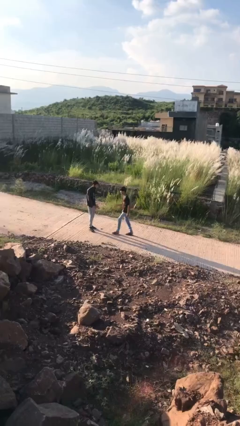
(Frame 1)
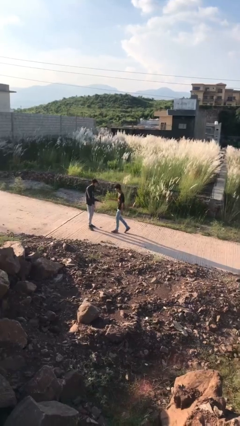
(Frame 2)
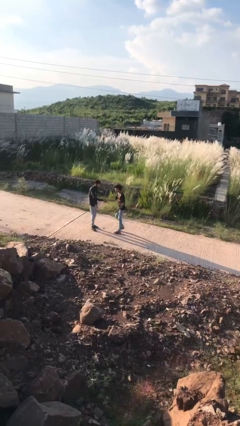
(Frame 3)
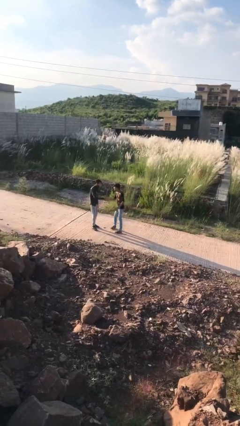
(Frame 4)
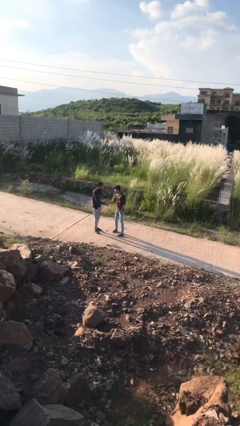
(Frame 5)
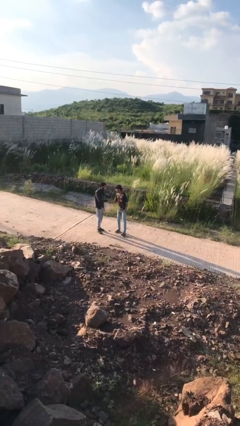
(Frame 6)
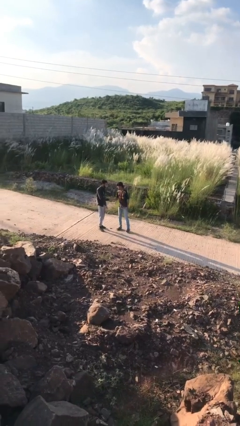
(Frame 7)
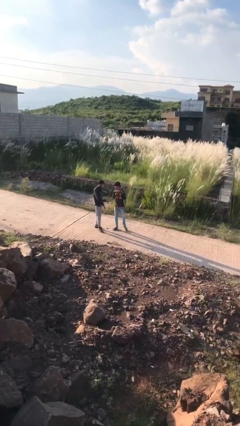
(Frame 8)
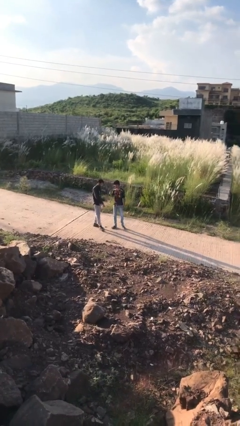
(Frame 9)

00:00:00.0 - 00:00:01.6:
person shakes hand

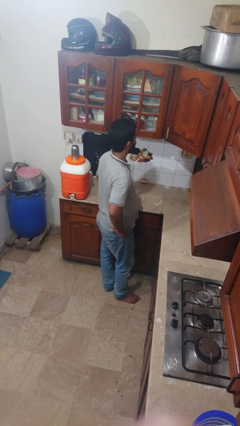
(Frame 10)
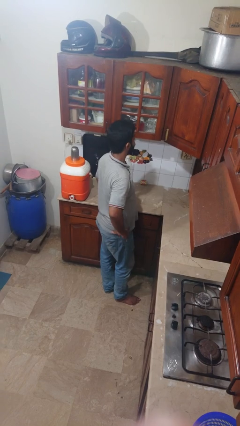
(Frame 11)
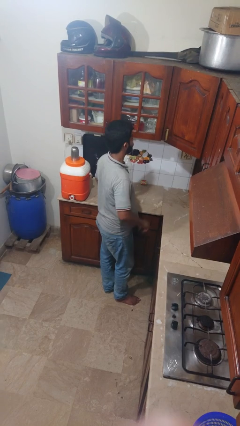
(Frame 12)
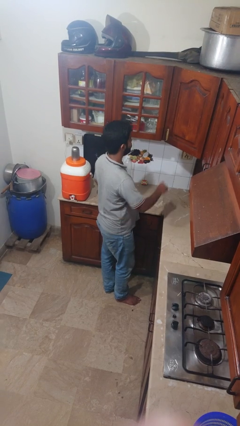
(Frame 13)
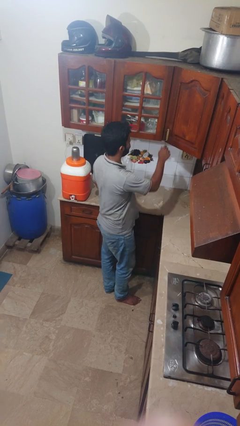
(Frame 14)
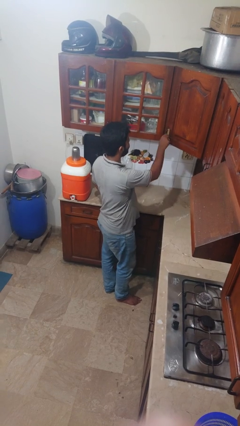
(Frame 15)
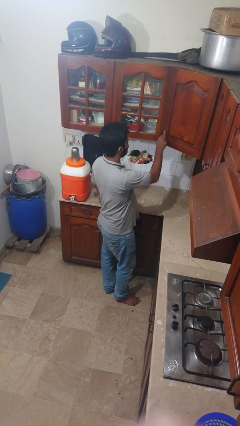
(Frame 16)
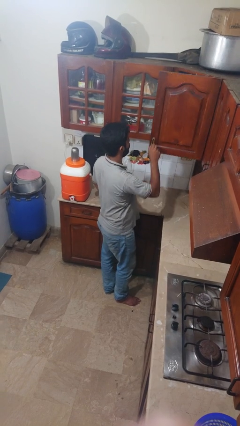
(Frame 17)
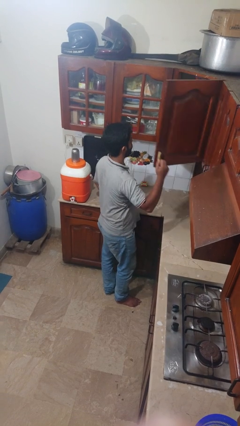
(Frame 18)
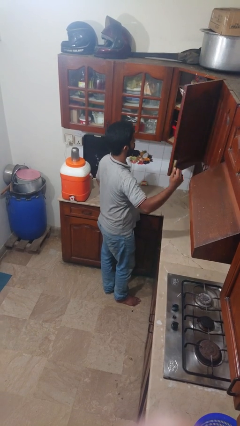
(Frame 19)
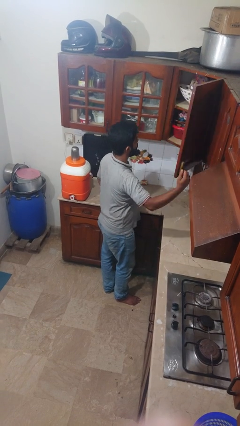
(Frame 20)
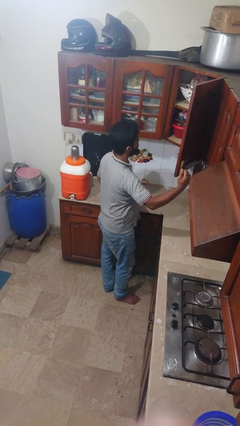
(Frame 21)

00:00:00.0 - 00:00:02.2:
person closes cabinet

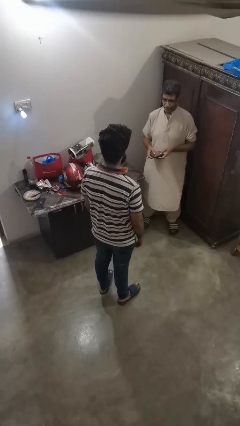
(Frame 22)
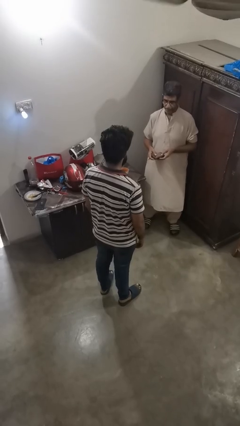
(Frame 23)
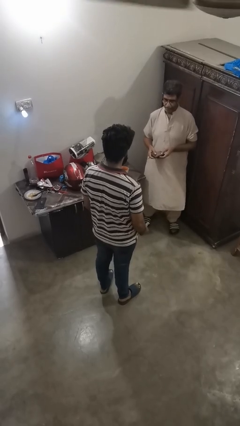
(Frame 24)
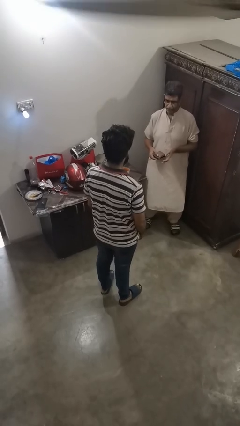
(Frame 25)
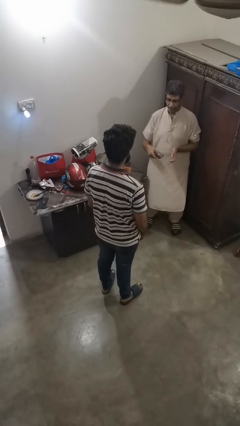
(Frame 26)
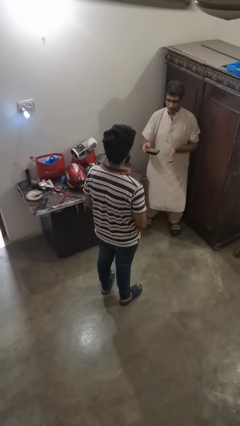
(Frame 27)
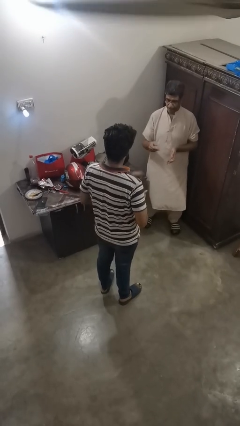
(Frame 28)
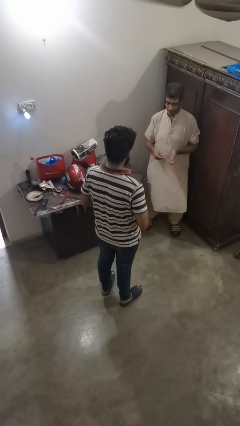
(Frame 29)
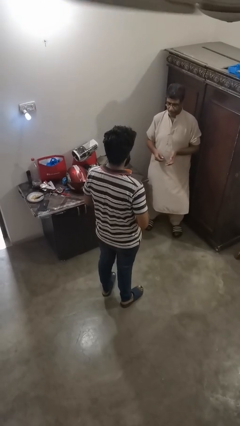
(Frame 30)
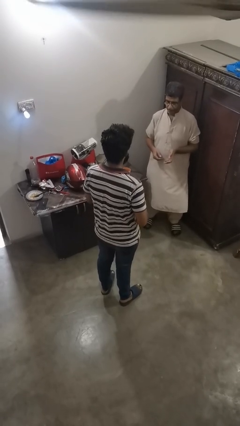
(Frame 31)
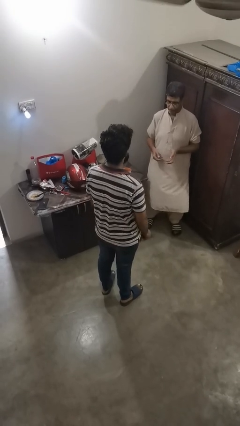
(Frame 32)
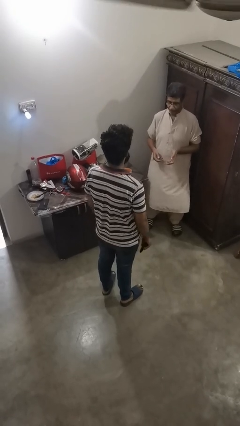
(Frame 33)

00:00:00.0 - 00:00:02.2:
person catches object from person

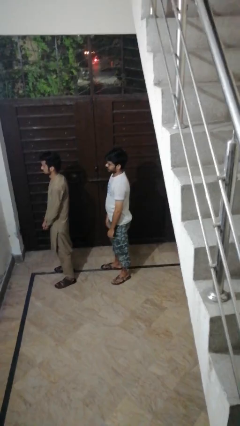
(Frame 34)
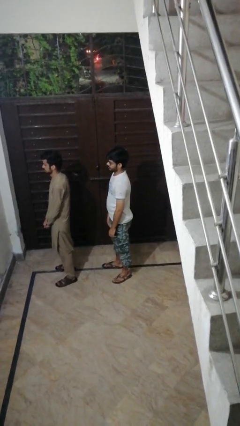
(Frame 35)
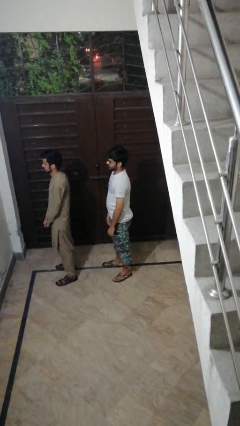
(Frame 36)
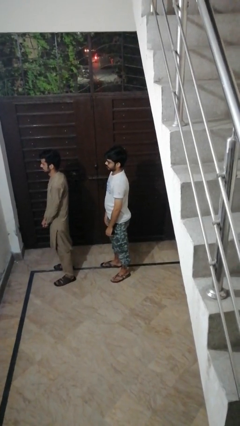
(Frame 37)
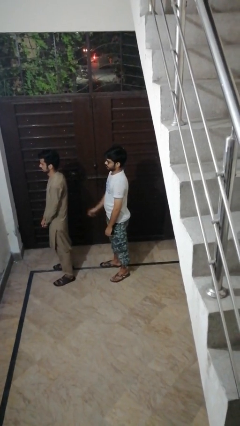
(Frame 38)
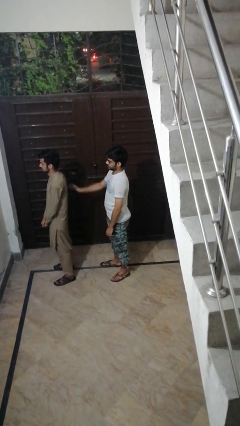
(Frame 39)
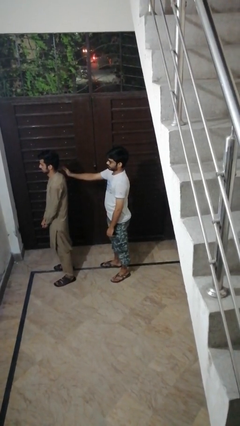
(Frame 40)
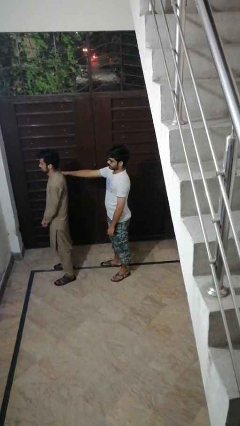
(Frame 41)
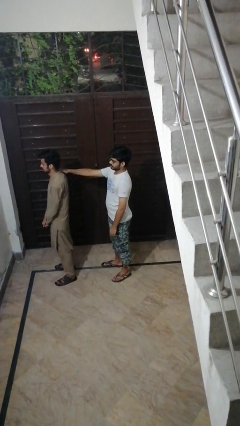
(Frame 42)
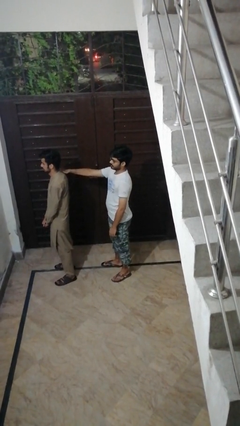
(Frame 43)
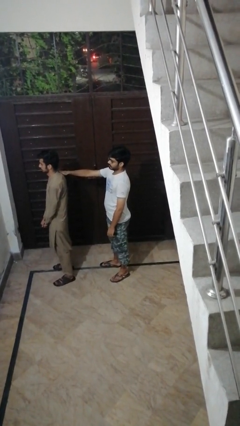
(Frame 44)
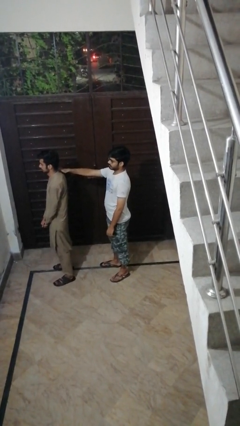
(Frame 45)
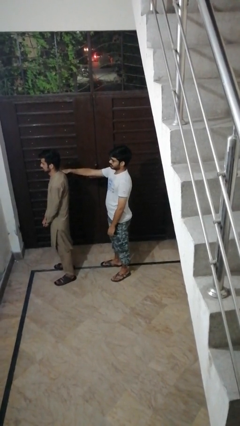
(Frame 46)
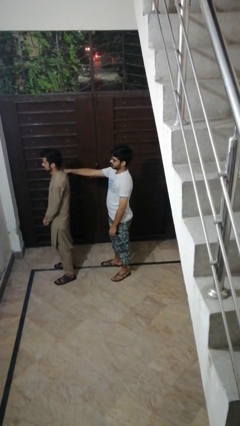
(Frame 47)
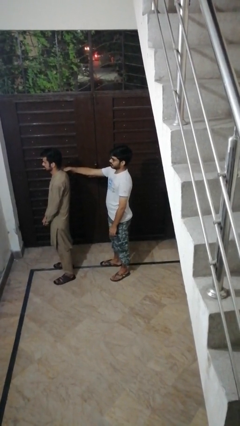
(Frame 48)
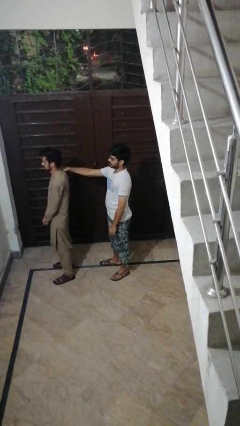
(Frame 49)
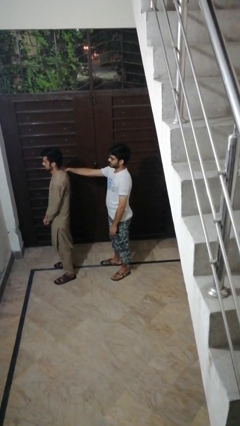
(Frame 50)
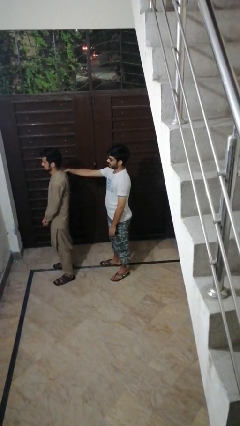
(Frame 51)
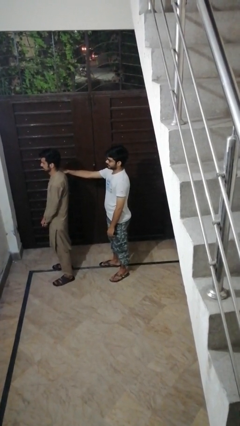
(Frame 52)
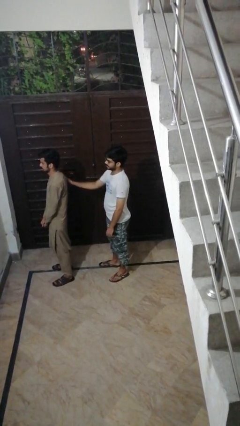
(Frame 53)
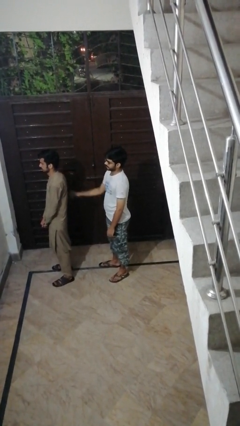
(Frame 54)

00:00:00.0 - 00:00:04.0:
person touches back of person

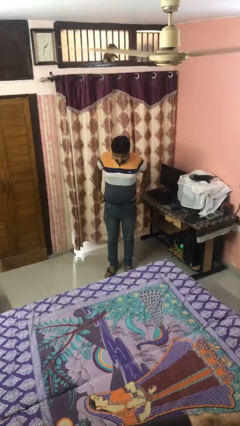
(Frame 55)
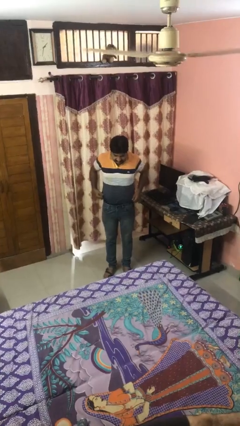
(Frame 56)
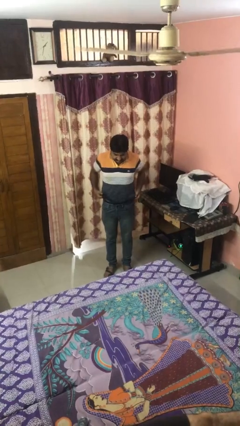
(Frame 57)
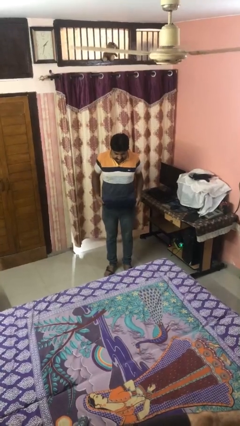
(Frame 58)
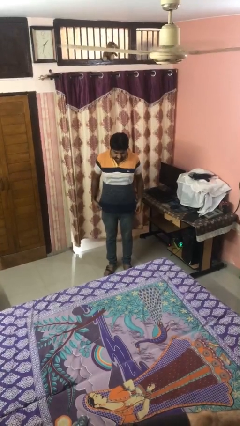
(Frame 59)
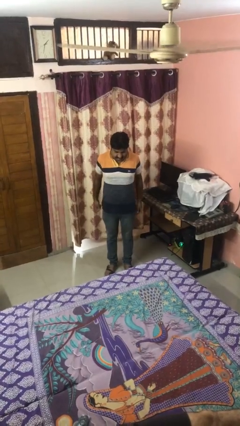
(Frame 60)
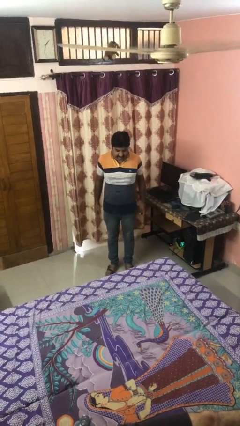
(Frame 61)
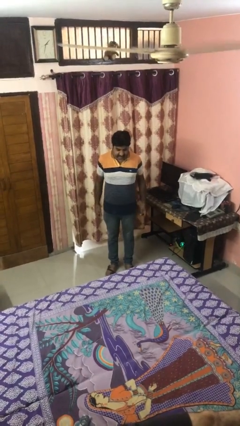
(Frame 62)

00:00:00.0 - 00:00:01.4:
person untucks shirt

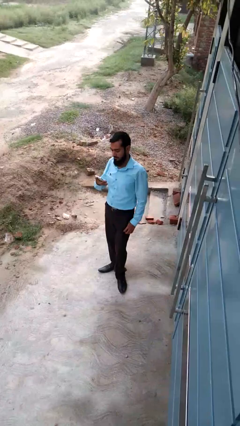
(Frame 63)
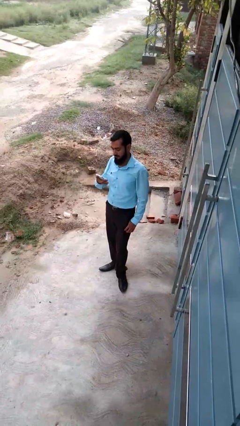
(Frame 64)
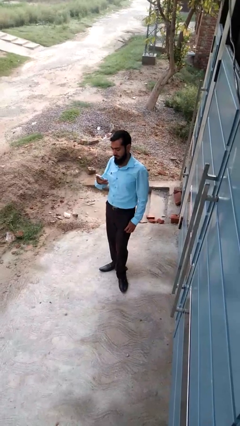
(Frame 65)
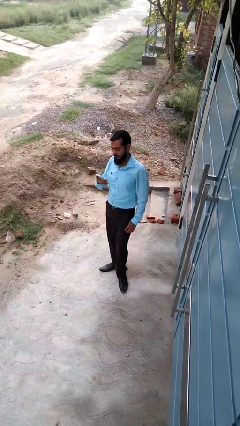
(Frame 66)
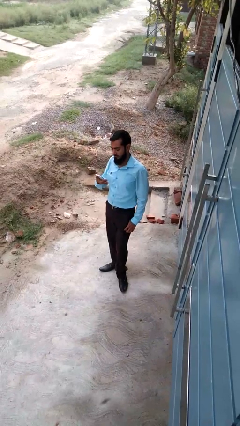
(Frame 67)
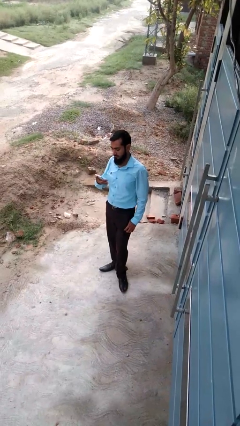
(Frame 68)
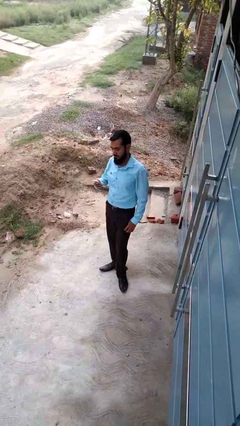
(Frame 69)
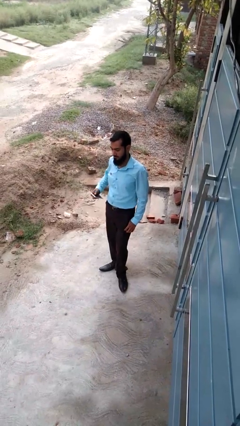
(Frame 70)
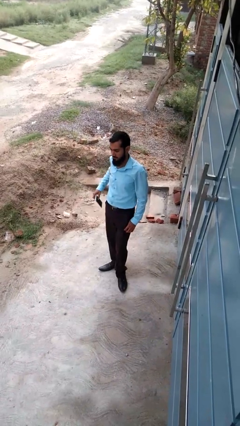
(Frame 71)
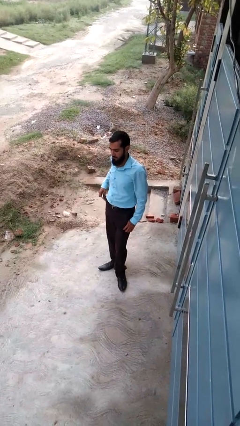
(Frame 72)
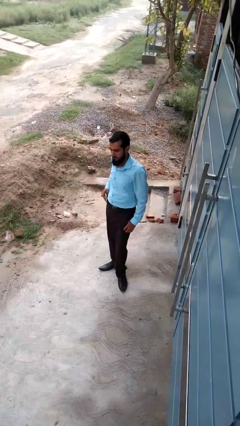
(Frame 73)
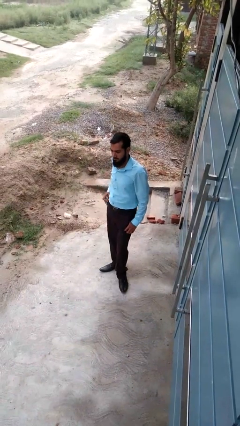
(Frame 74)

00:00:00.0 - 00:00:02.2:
person puts phone into pocket

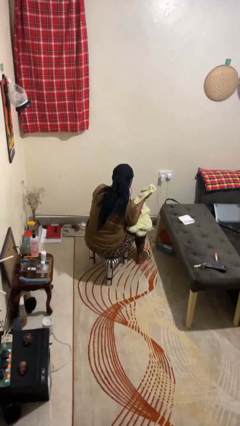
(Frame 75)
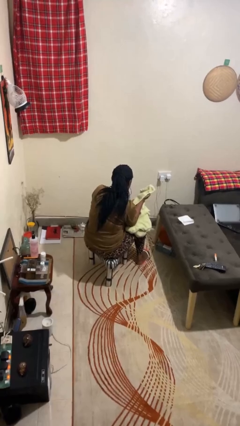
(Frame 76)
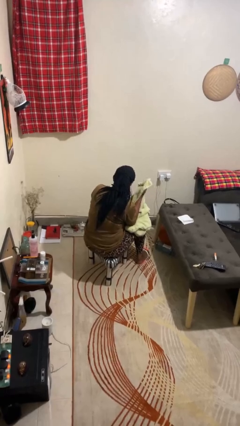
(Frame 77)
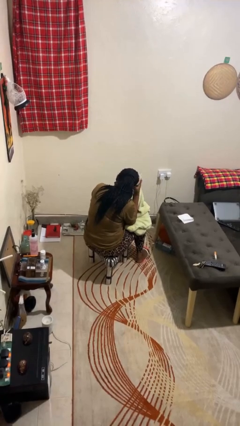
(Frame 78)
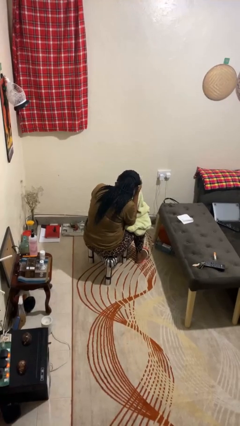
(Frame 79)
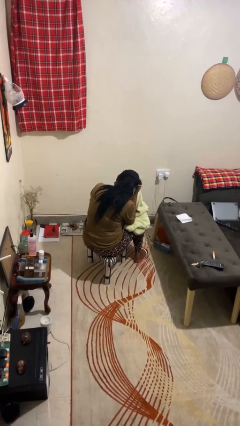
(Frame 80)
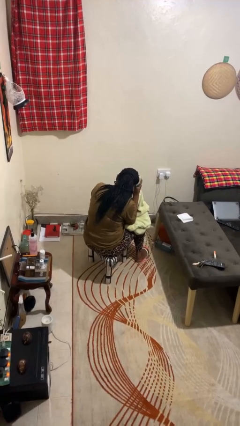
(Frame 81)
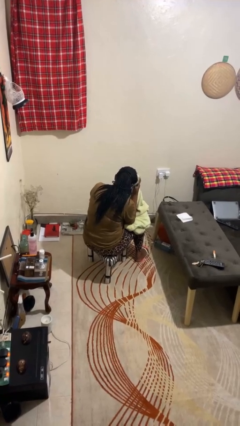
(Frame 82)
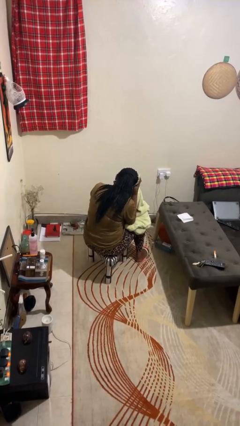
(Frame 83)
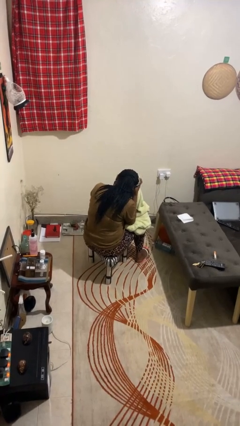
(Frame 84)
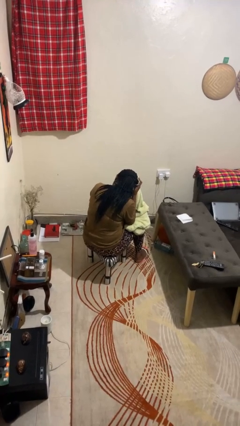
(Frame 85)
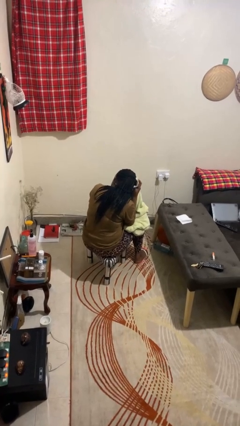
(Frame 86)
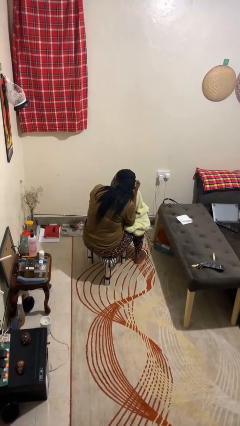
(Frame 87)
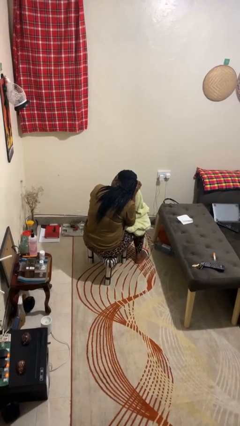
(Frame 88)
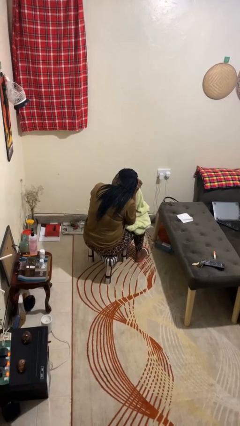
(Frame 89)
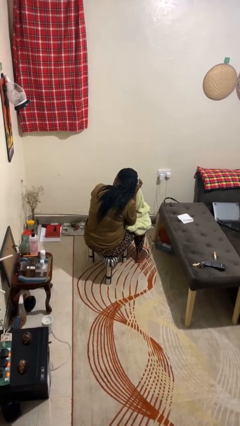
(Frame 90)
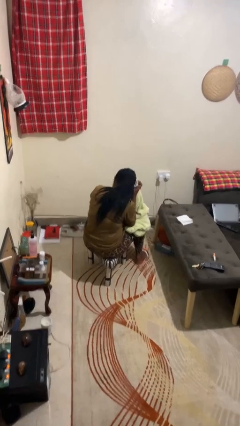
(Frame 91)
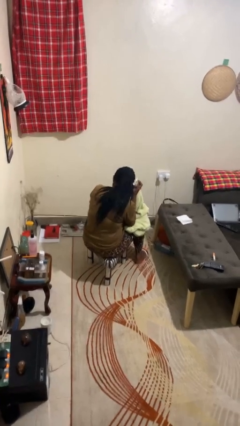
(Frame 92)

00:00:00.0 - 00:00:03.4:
person dries hair with towel
